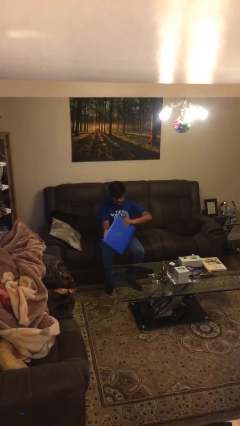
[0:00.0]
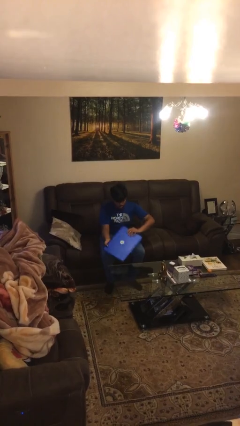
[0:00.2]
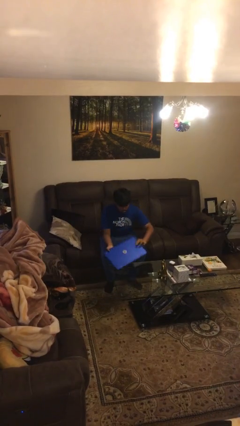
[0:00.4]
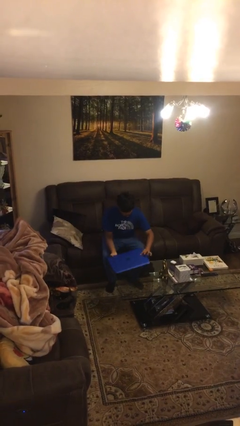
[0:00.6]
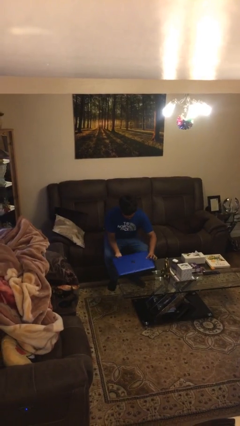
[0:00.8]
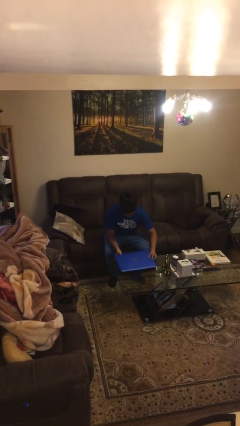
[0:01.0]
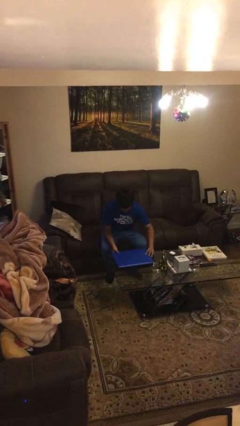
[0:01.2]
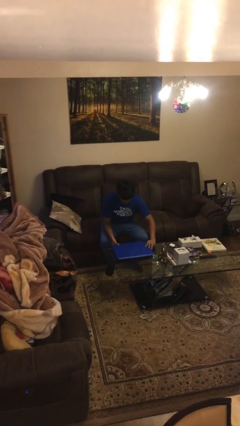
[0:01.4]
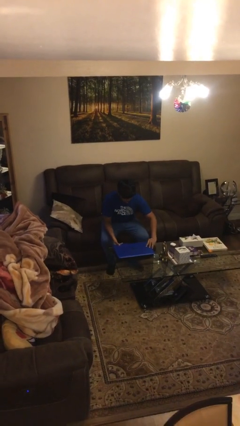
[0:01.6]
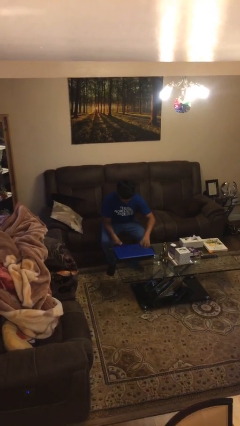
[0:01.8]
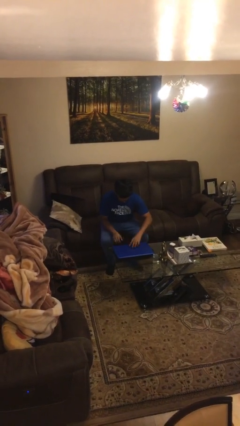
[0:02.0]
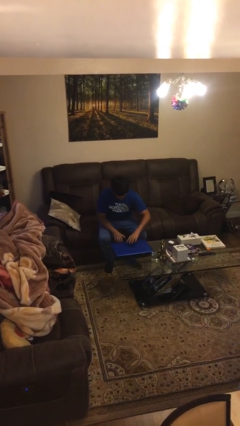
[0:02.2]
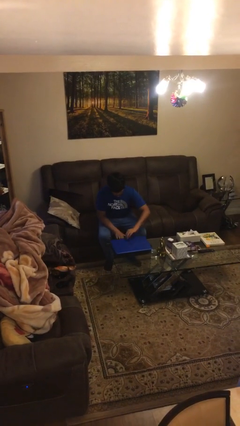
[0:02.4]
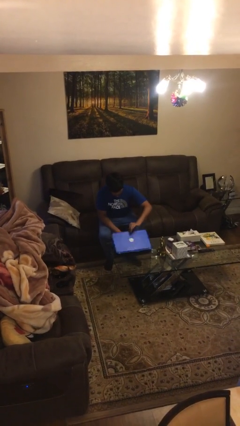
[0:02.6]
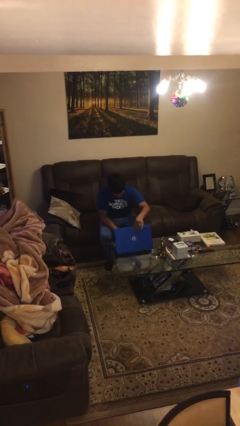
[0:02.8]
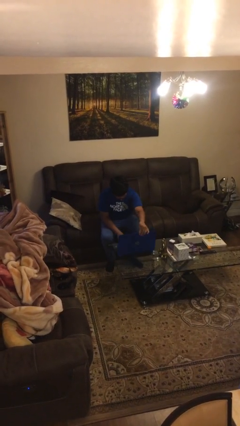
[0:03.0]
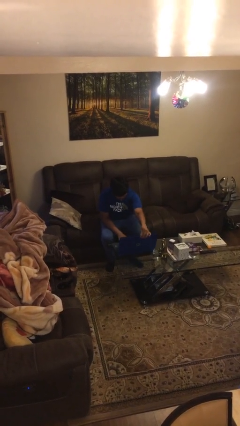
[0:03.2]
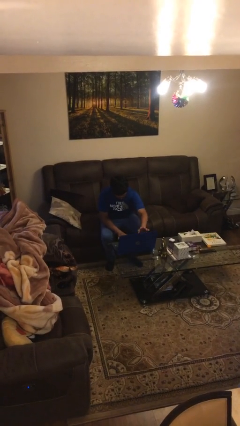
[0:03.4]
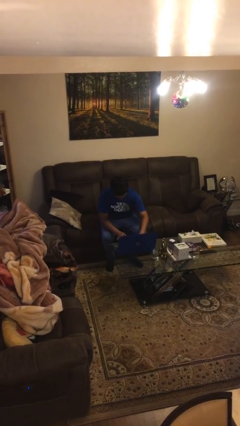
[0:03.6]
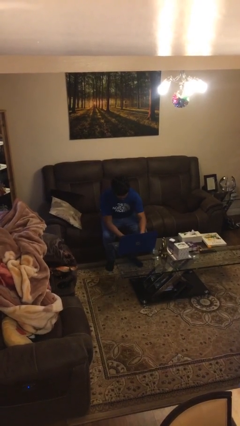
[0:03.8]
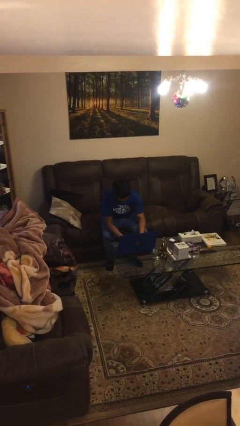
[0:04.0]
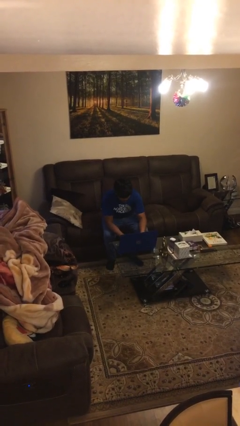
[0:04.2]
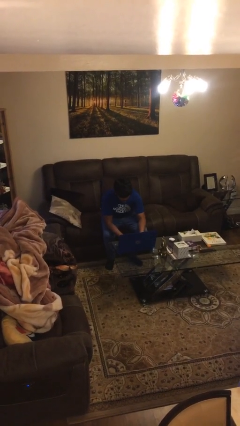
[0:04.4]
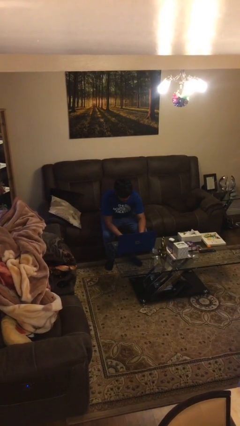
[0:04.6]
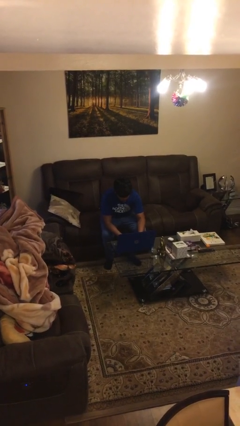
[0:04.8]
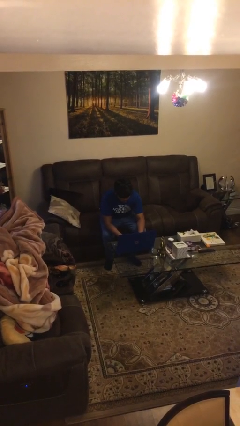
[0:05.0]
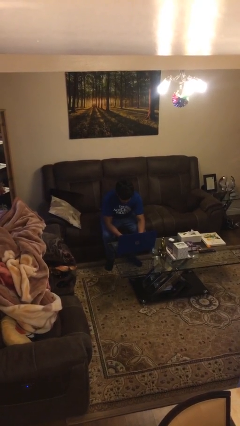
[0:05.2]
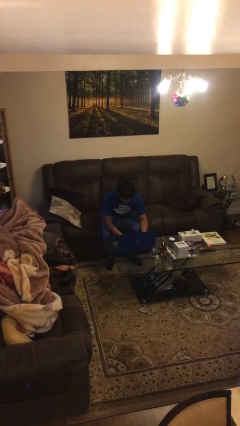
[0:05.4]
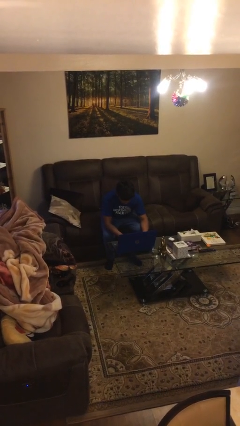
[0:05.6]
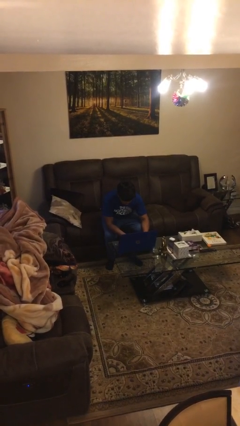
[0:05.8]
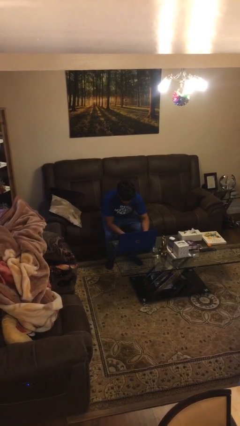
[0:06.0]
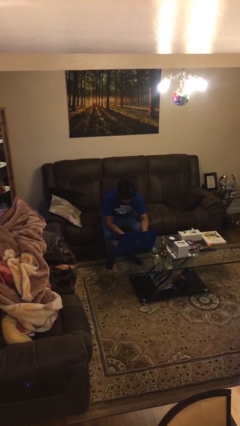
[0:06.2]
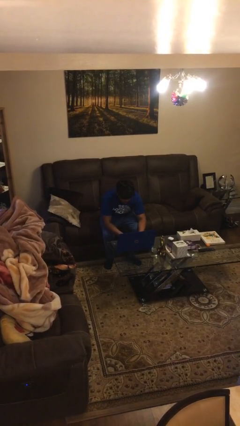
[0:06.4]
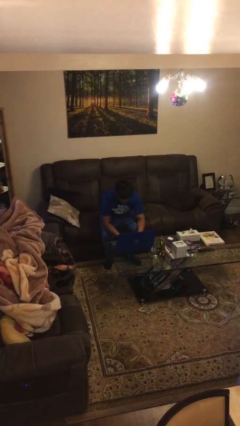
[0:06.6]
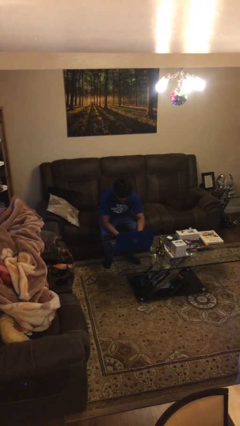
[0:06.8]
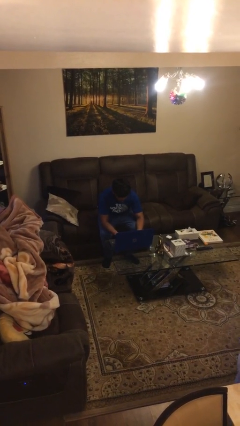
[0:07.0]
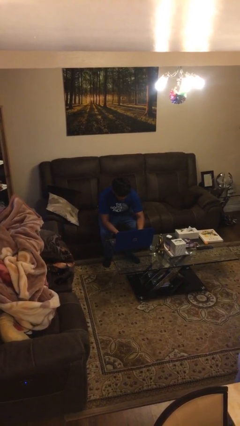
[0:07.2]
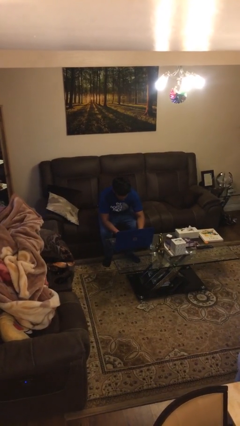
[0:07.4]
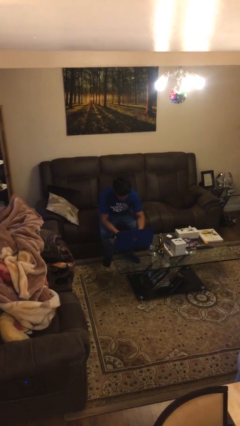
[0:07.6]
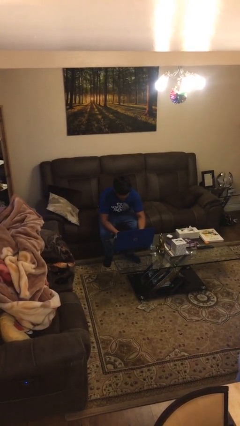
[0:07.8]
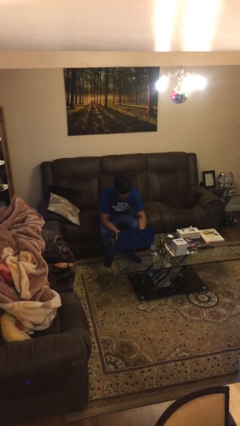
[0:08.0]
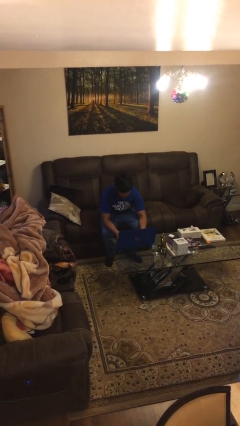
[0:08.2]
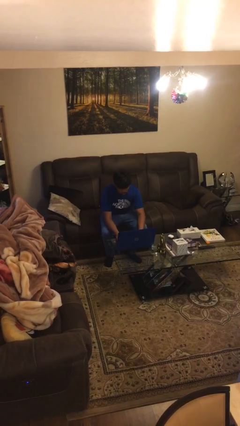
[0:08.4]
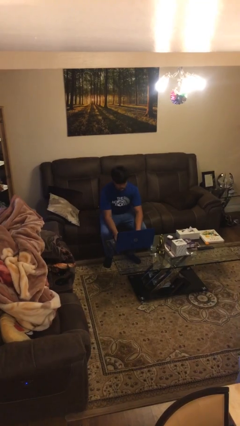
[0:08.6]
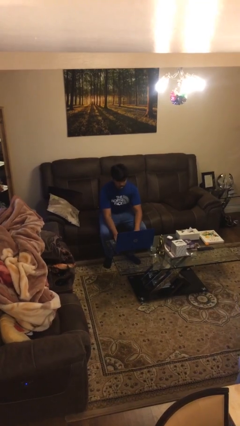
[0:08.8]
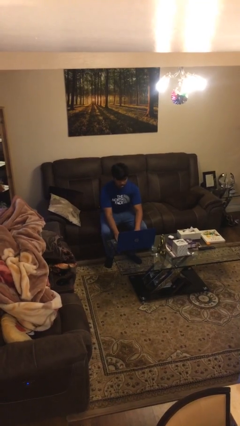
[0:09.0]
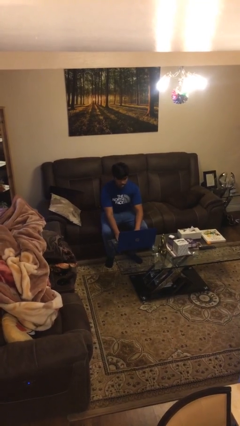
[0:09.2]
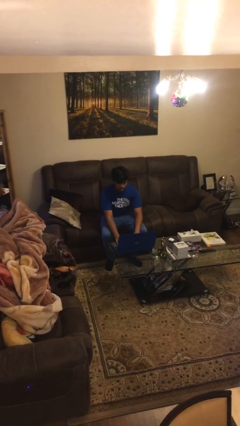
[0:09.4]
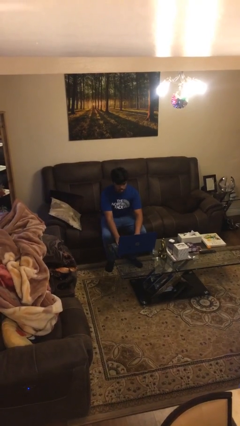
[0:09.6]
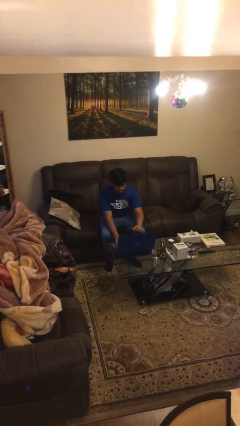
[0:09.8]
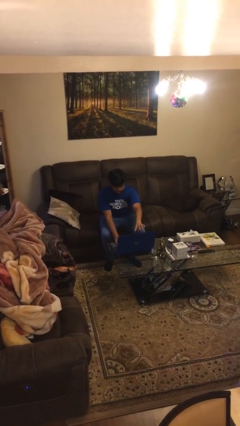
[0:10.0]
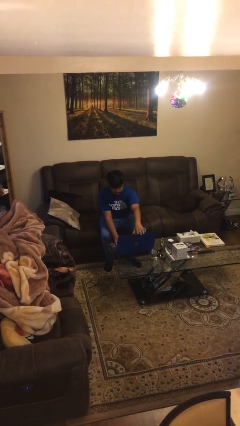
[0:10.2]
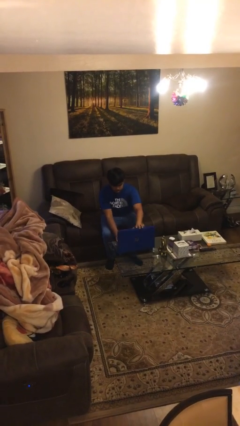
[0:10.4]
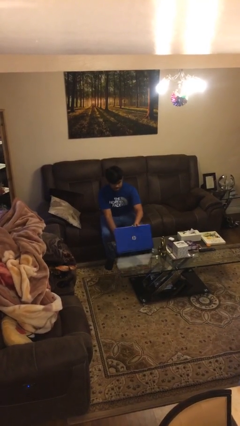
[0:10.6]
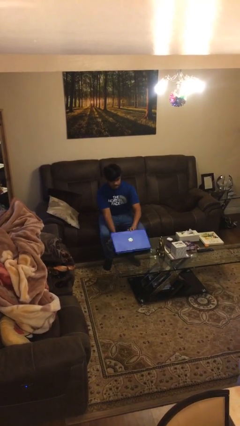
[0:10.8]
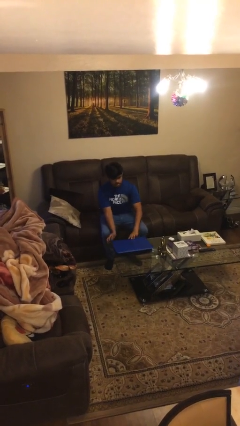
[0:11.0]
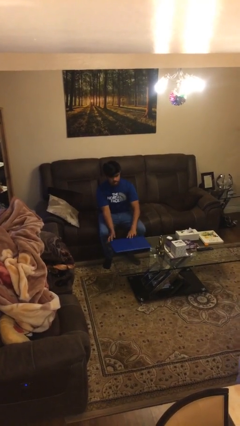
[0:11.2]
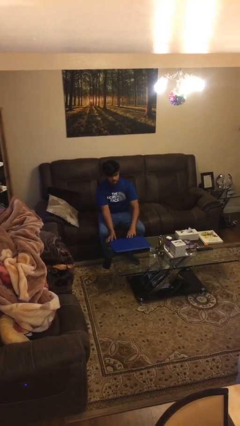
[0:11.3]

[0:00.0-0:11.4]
person interacts with laptop

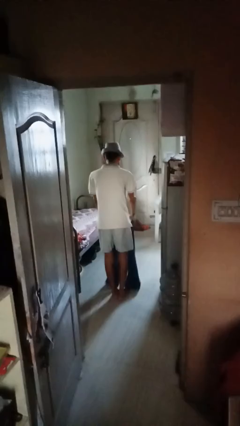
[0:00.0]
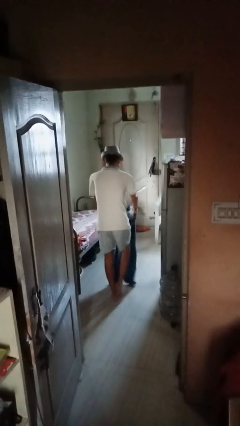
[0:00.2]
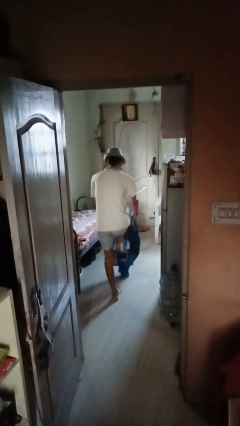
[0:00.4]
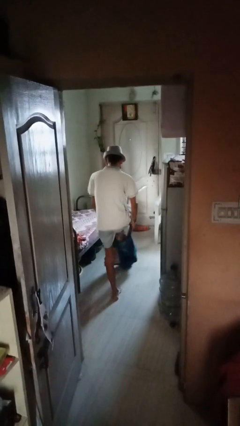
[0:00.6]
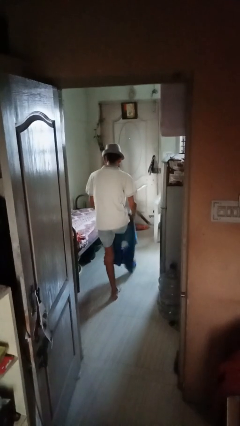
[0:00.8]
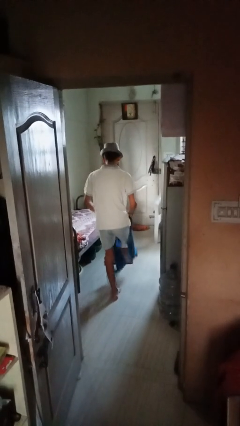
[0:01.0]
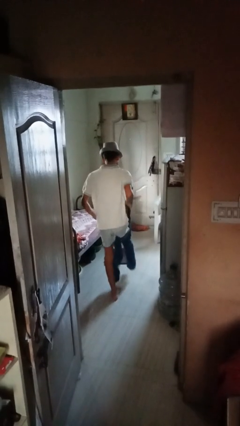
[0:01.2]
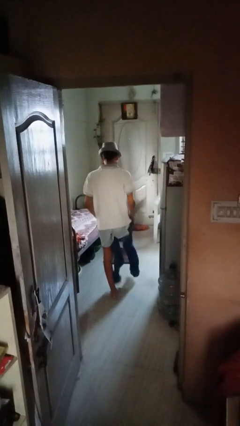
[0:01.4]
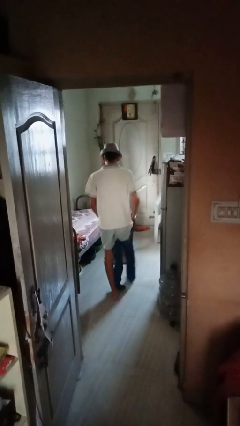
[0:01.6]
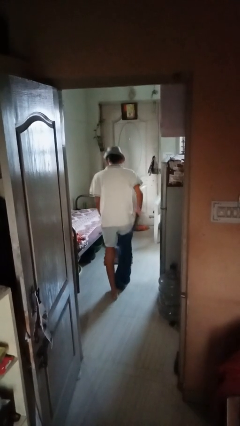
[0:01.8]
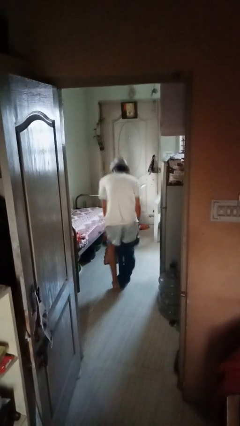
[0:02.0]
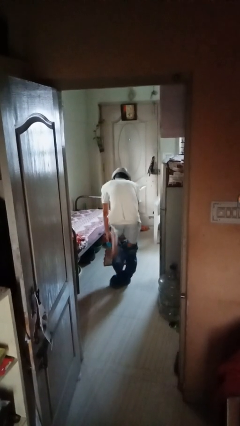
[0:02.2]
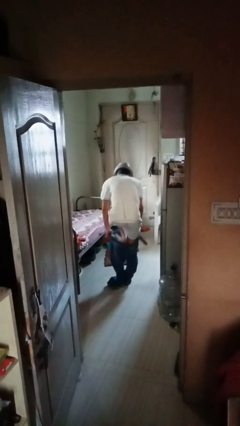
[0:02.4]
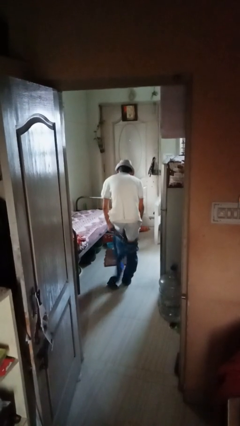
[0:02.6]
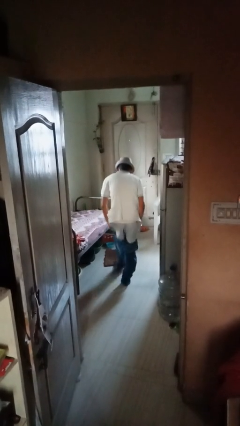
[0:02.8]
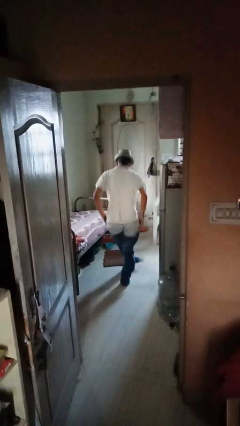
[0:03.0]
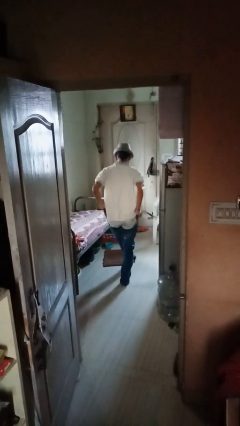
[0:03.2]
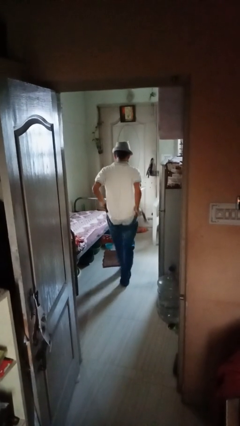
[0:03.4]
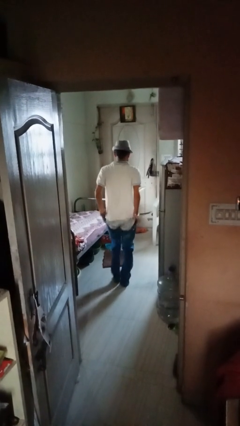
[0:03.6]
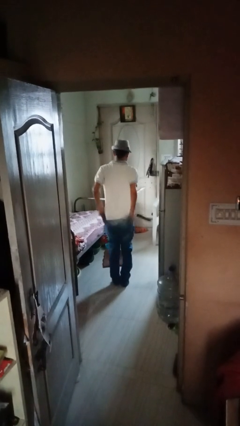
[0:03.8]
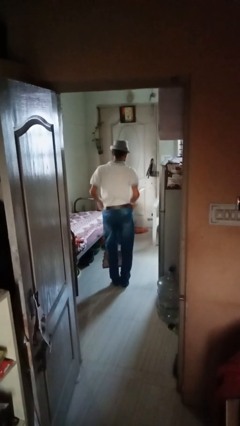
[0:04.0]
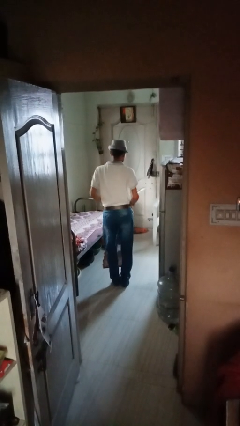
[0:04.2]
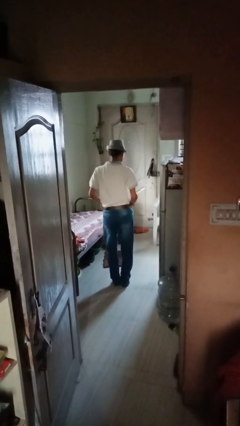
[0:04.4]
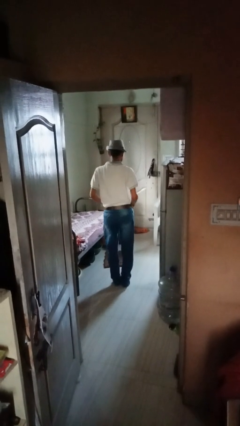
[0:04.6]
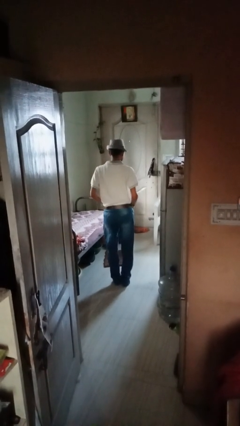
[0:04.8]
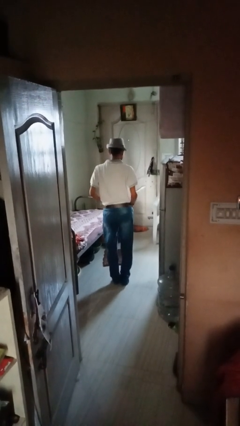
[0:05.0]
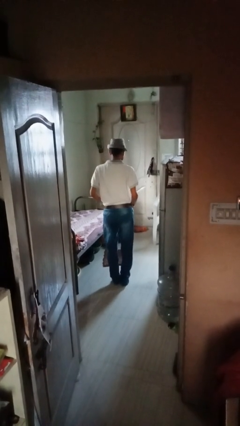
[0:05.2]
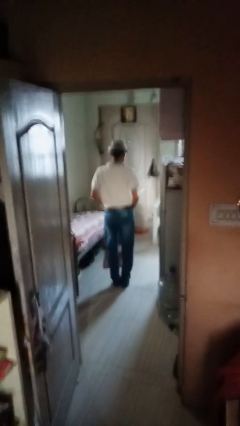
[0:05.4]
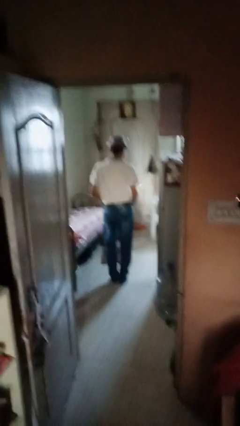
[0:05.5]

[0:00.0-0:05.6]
person puts on pants

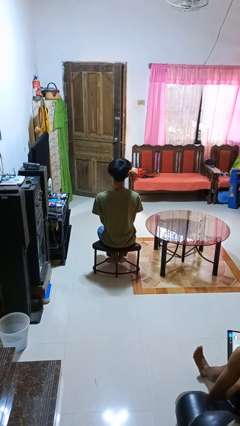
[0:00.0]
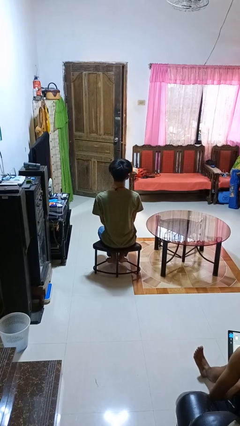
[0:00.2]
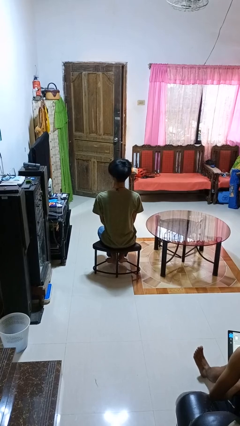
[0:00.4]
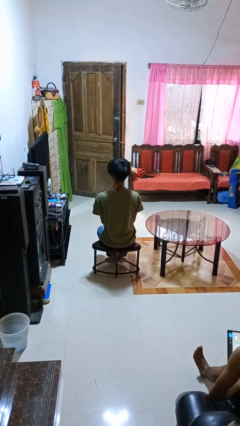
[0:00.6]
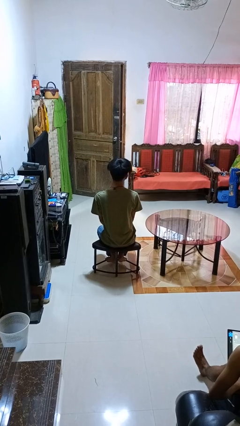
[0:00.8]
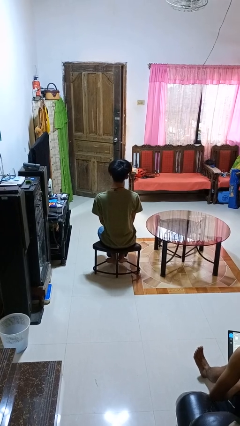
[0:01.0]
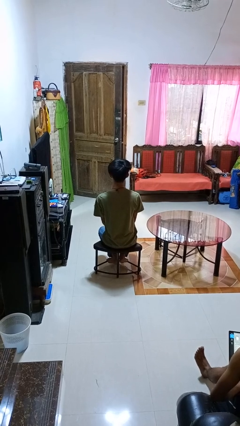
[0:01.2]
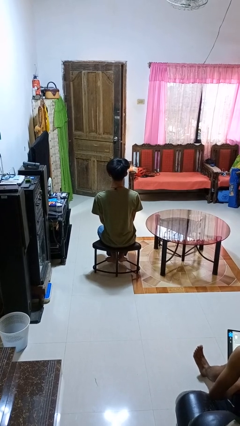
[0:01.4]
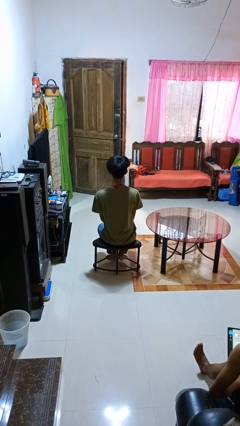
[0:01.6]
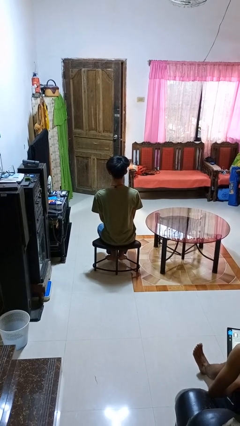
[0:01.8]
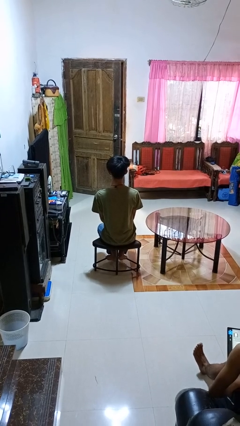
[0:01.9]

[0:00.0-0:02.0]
person shakes head
